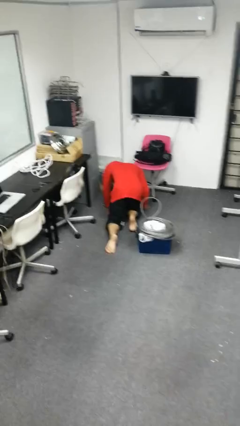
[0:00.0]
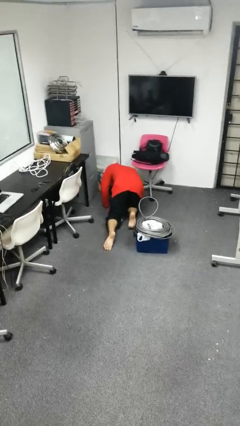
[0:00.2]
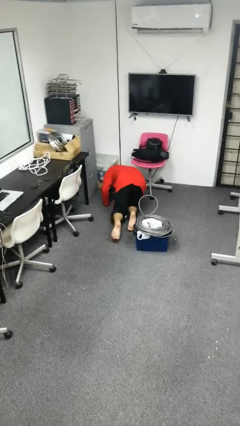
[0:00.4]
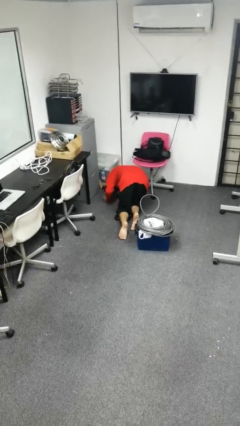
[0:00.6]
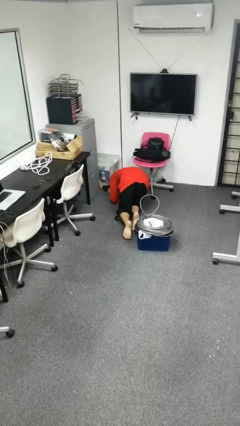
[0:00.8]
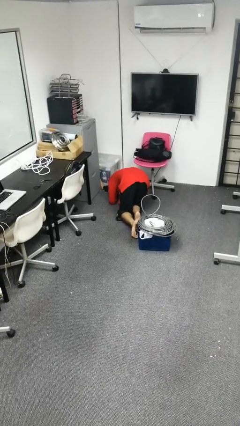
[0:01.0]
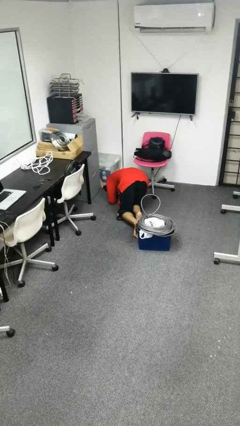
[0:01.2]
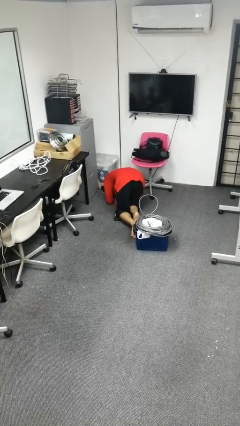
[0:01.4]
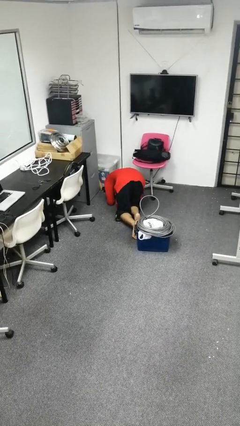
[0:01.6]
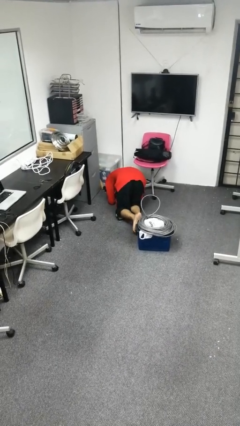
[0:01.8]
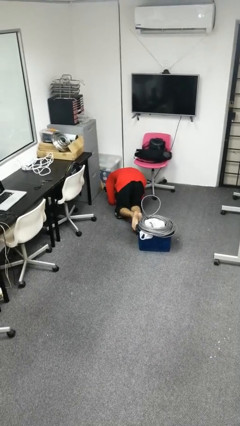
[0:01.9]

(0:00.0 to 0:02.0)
person lies down on floor

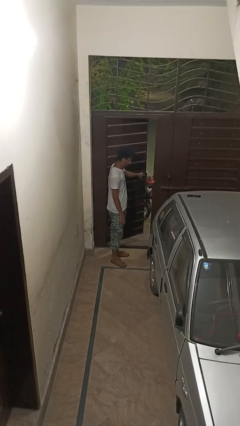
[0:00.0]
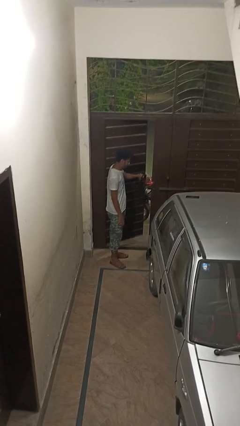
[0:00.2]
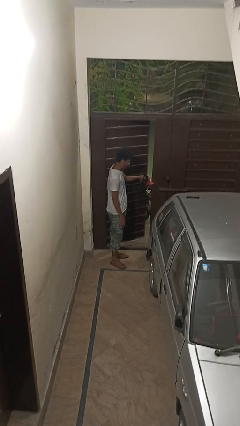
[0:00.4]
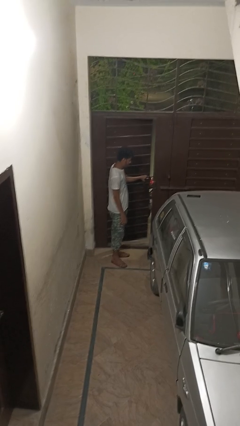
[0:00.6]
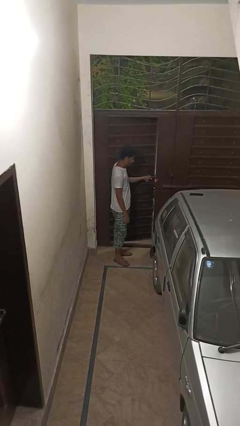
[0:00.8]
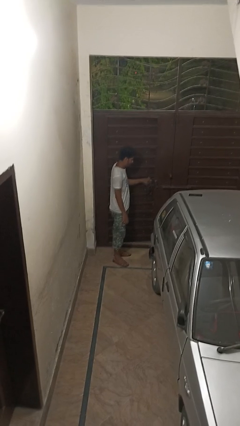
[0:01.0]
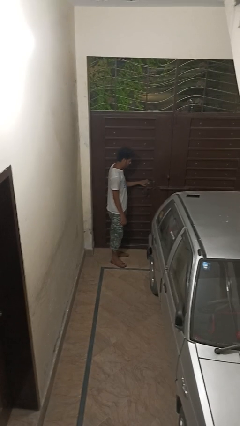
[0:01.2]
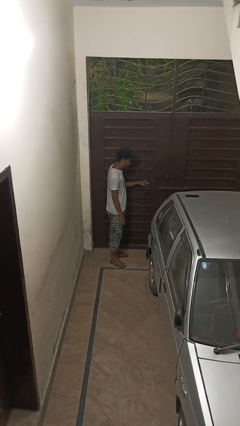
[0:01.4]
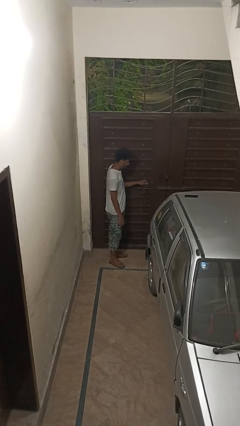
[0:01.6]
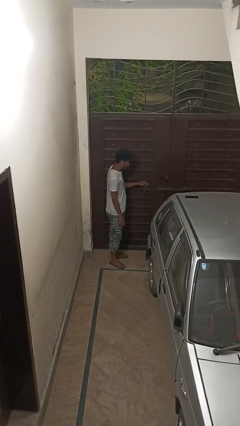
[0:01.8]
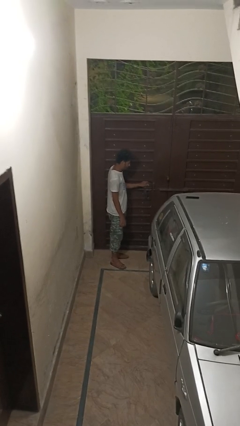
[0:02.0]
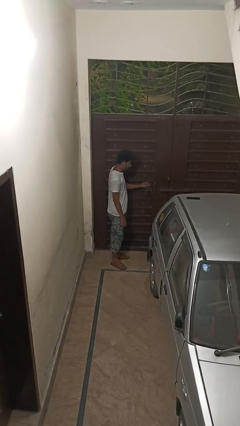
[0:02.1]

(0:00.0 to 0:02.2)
person closes gate

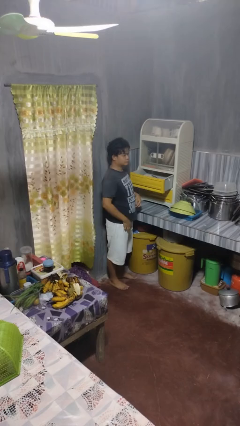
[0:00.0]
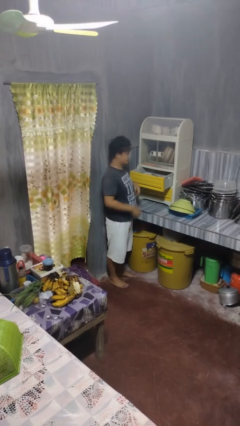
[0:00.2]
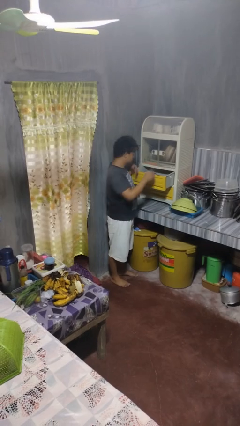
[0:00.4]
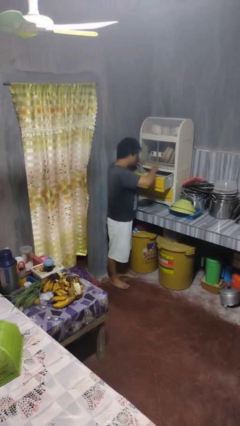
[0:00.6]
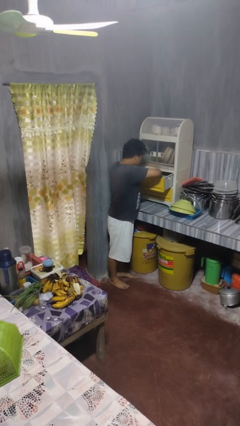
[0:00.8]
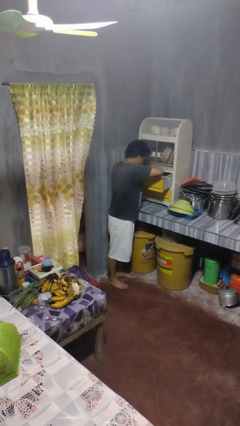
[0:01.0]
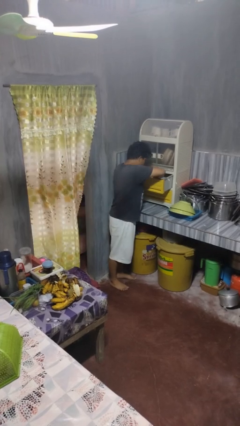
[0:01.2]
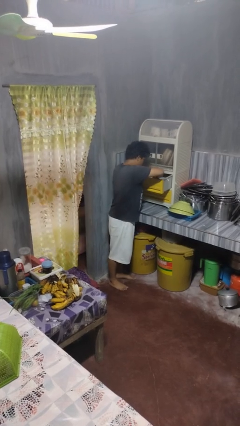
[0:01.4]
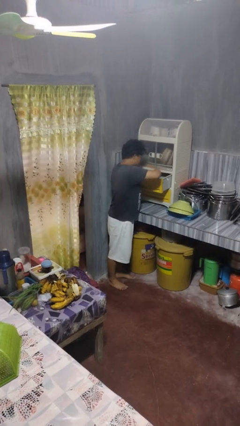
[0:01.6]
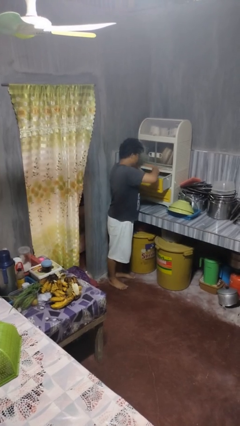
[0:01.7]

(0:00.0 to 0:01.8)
person takes object from kitchen drawer

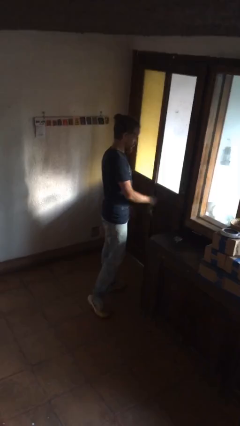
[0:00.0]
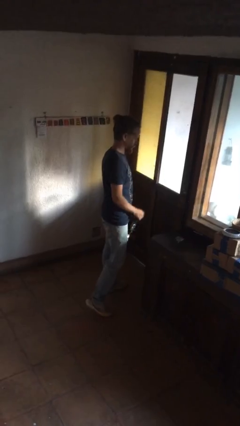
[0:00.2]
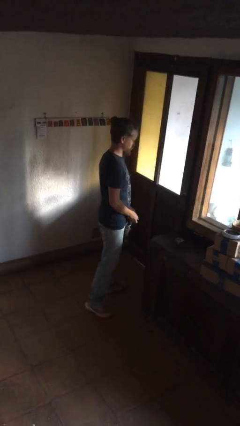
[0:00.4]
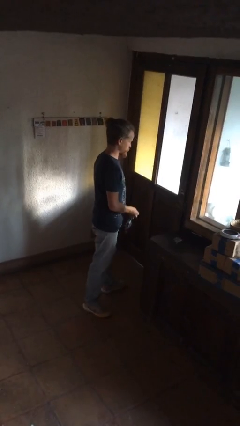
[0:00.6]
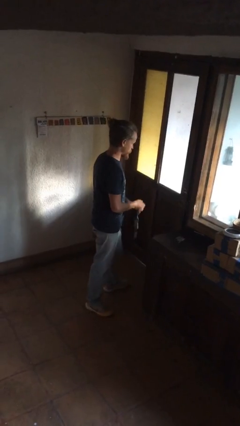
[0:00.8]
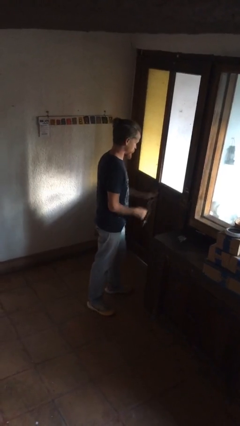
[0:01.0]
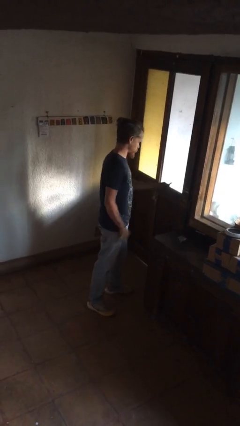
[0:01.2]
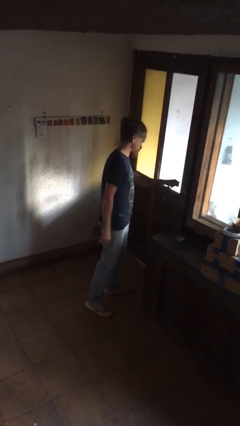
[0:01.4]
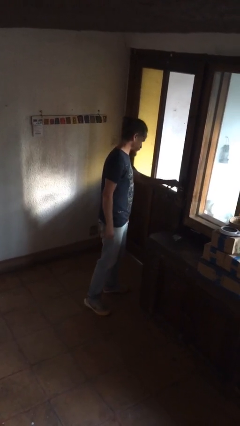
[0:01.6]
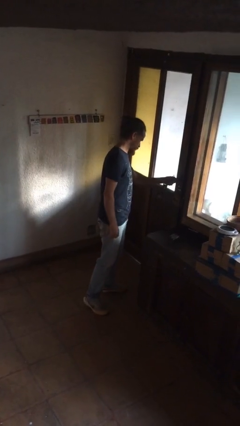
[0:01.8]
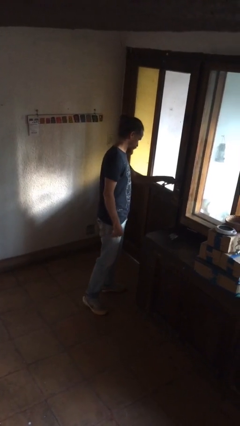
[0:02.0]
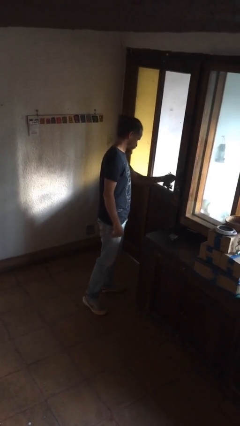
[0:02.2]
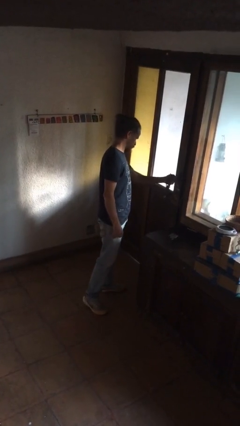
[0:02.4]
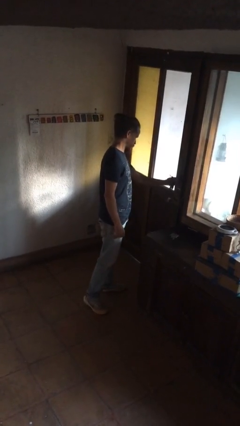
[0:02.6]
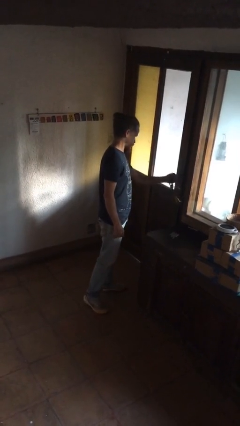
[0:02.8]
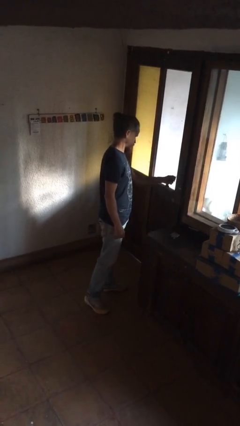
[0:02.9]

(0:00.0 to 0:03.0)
person unlocks door with keys

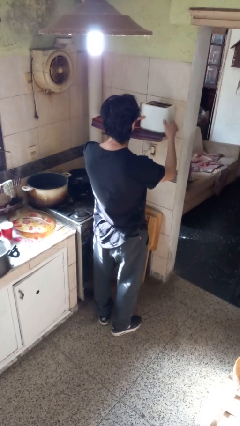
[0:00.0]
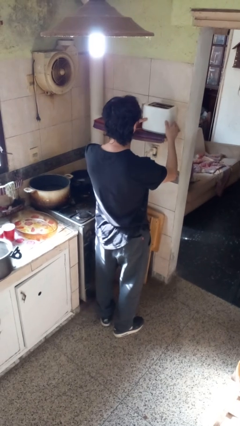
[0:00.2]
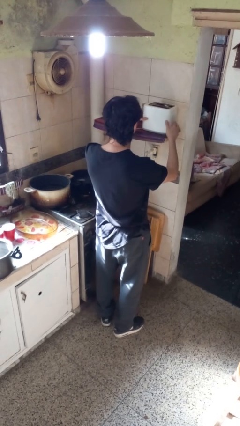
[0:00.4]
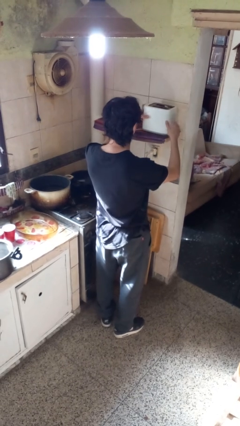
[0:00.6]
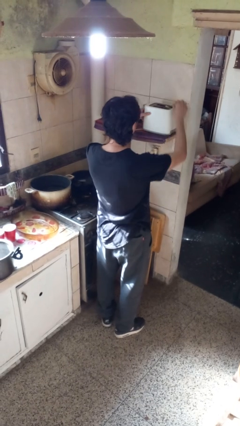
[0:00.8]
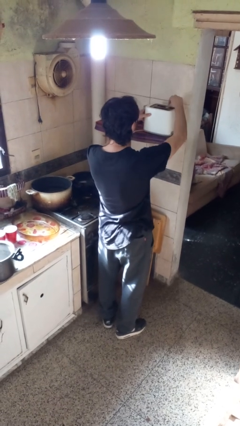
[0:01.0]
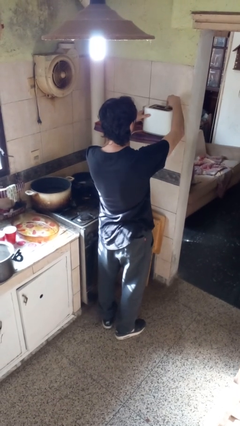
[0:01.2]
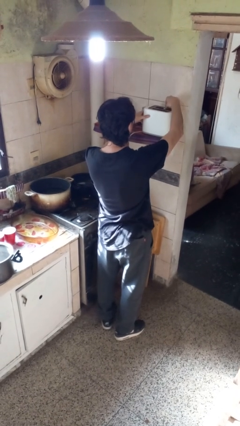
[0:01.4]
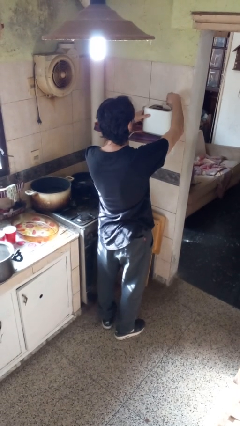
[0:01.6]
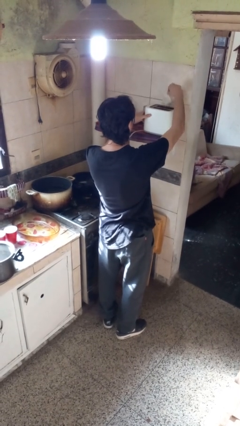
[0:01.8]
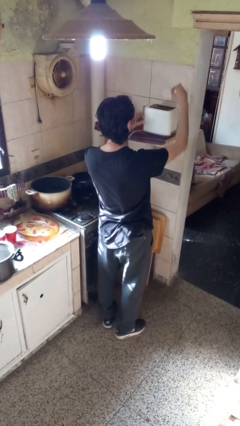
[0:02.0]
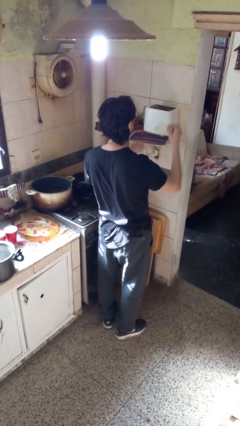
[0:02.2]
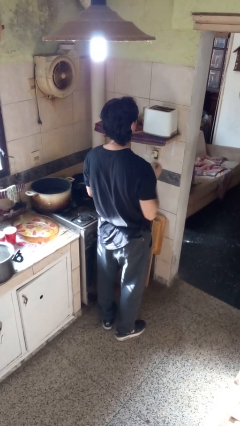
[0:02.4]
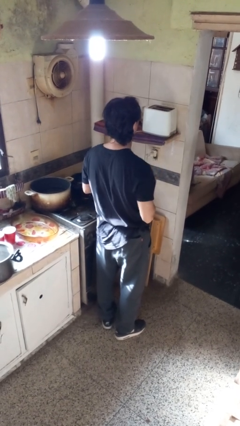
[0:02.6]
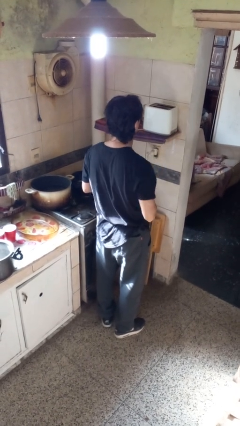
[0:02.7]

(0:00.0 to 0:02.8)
person takes object from toaster

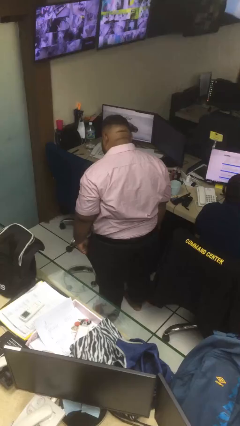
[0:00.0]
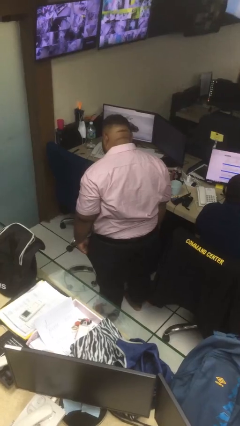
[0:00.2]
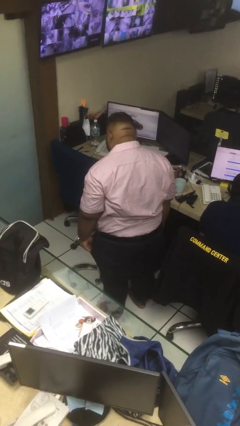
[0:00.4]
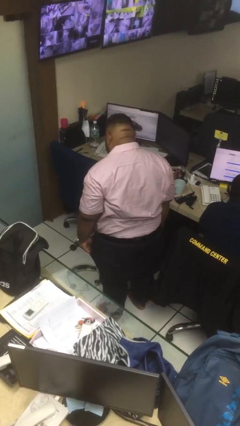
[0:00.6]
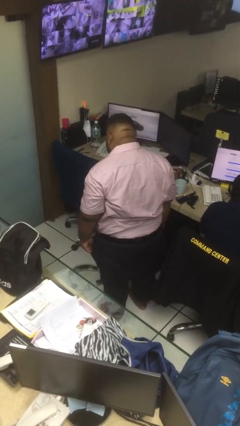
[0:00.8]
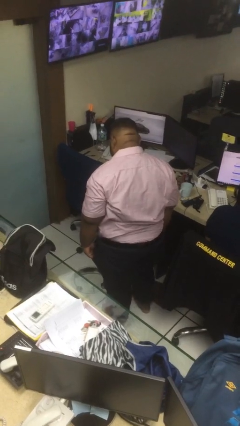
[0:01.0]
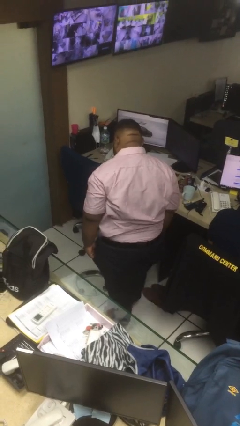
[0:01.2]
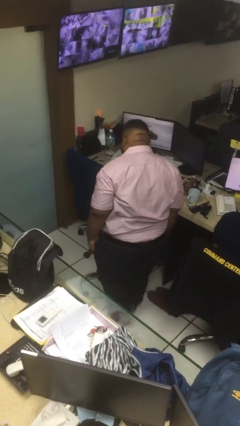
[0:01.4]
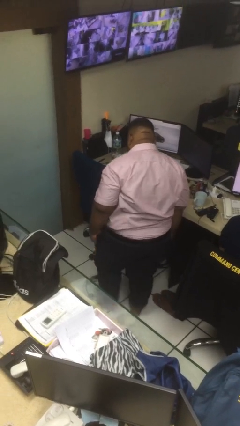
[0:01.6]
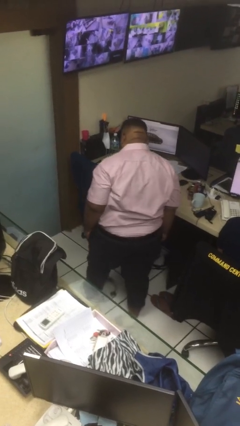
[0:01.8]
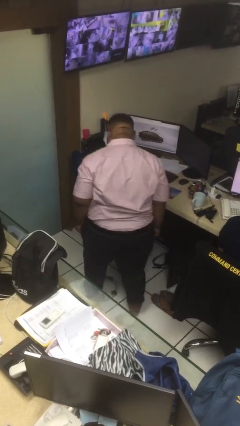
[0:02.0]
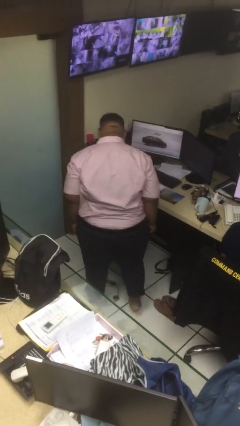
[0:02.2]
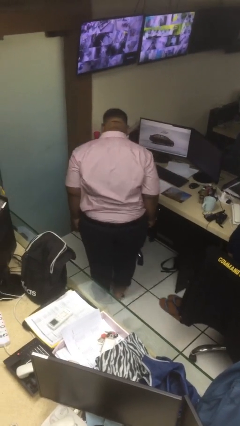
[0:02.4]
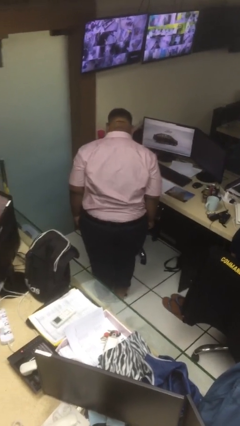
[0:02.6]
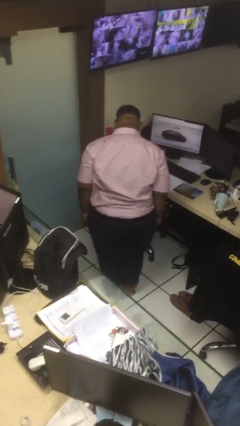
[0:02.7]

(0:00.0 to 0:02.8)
person uses bodyweight scale

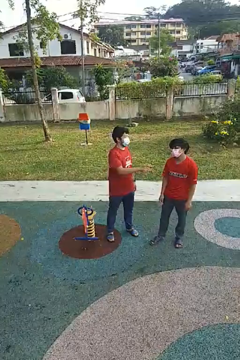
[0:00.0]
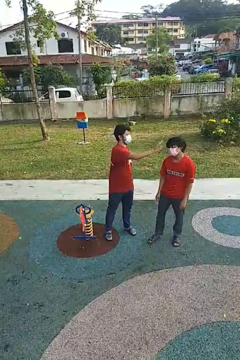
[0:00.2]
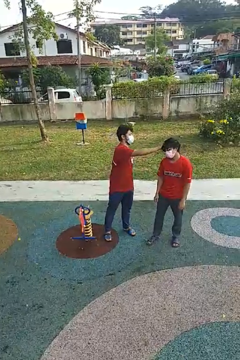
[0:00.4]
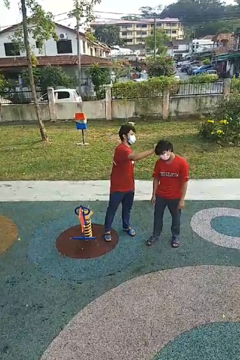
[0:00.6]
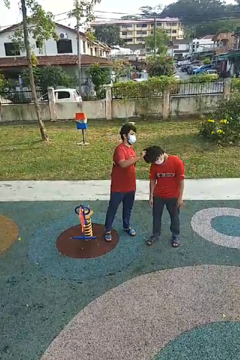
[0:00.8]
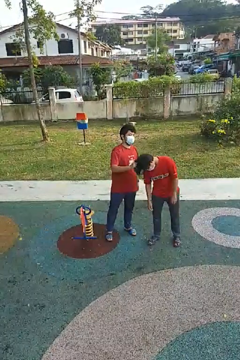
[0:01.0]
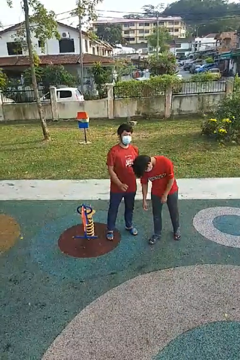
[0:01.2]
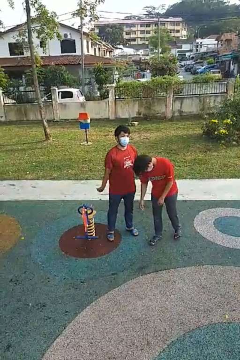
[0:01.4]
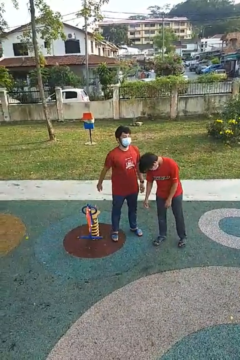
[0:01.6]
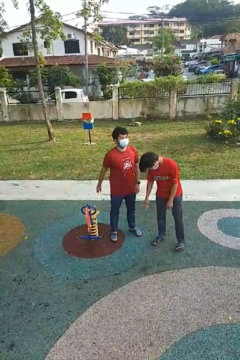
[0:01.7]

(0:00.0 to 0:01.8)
person grabs person by hair

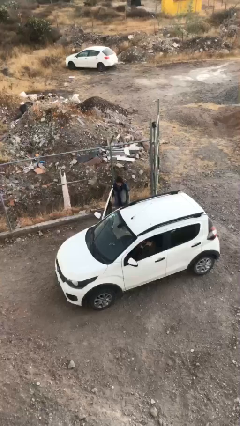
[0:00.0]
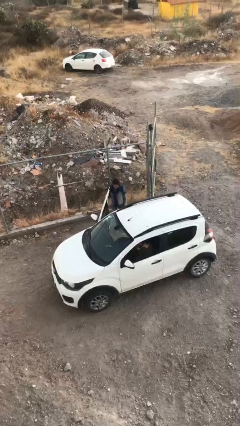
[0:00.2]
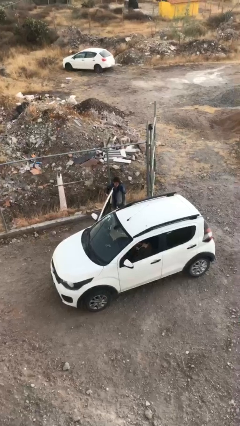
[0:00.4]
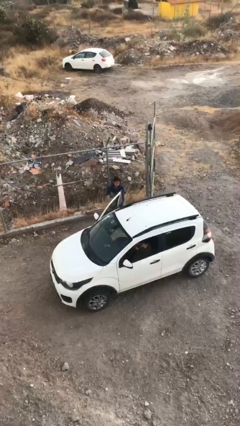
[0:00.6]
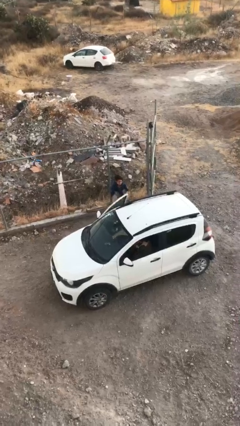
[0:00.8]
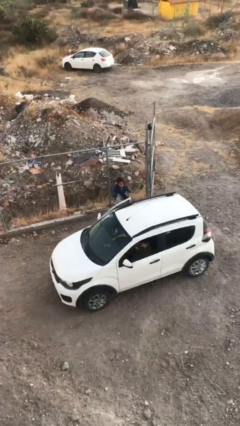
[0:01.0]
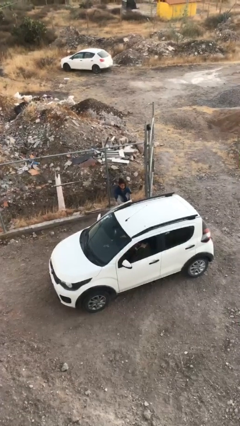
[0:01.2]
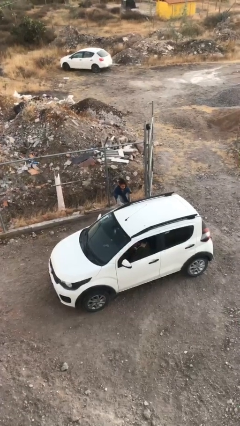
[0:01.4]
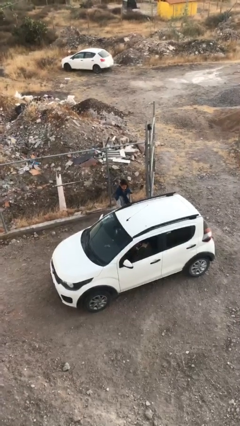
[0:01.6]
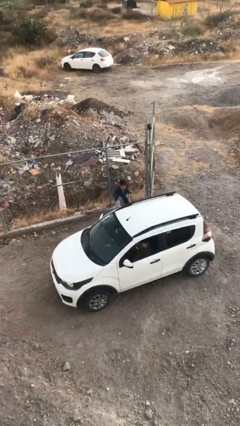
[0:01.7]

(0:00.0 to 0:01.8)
person closes car door
